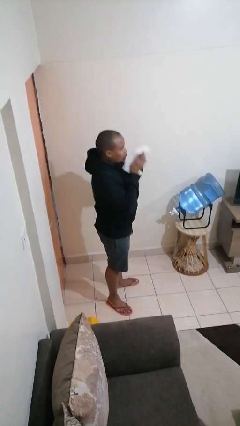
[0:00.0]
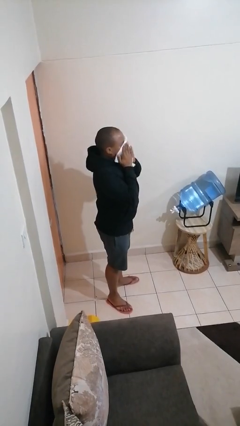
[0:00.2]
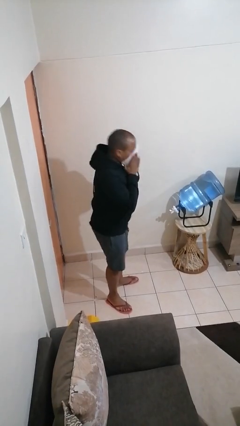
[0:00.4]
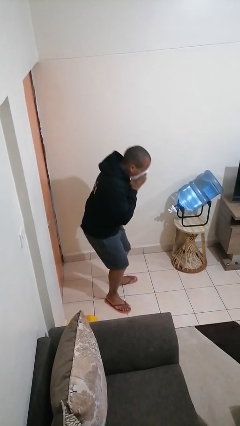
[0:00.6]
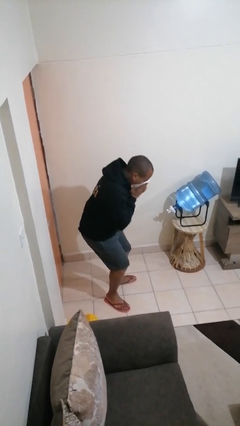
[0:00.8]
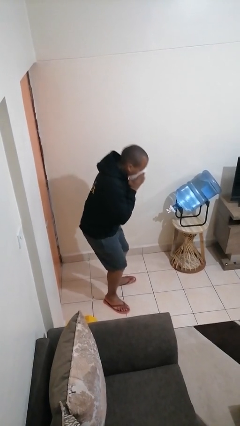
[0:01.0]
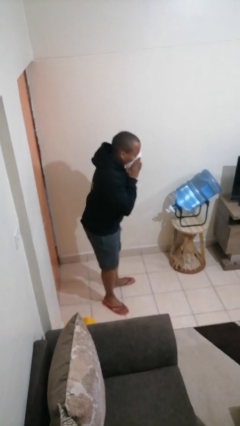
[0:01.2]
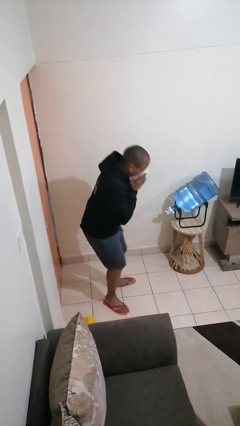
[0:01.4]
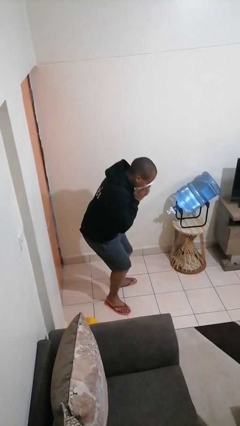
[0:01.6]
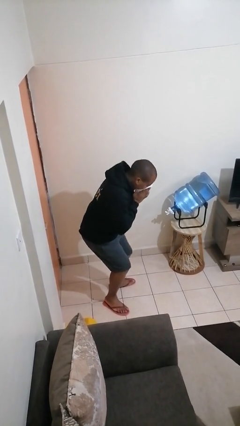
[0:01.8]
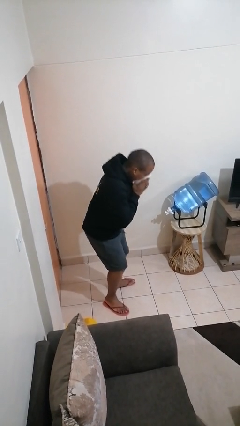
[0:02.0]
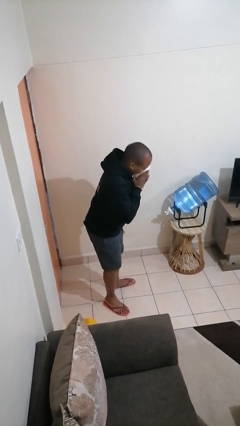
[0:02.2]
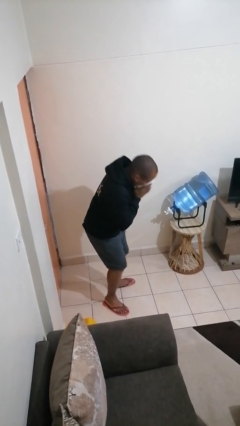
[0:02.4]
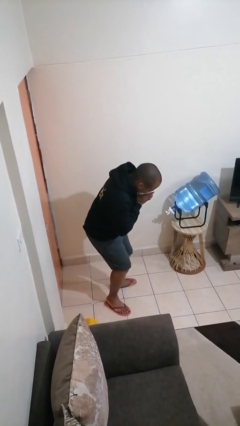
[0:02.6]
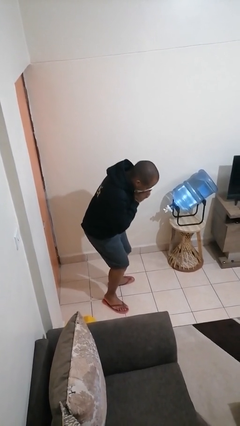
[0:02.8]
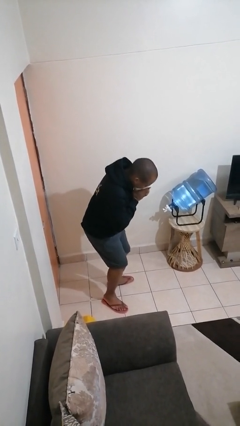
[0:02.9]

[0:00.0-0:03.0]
person blows nose

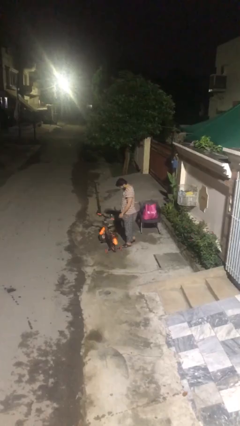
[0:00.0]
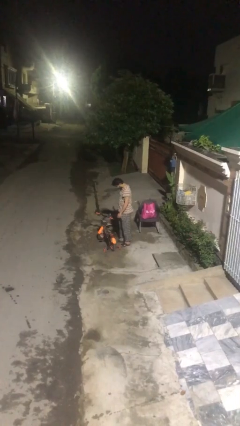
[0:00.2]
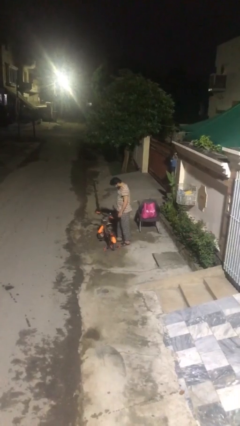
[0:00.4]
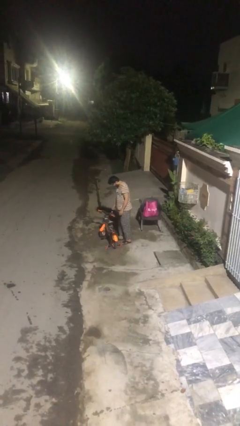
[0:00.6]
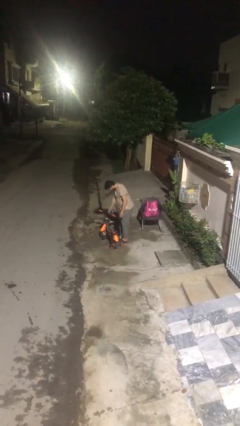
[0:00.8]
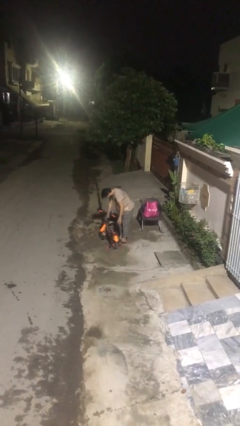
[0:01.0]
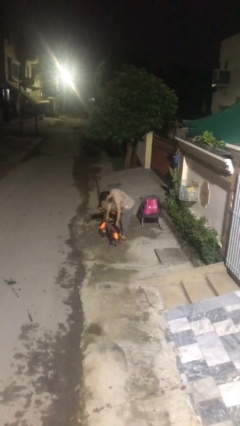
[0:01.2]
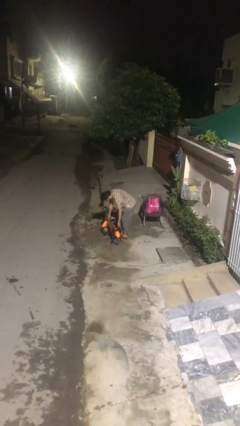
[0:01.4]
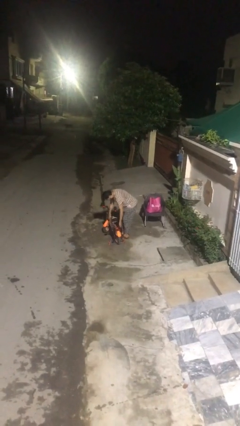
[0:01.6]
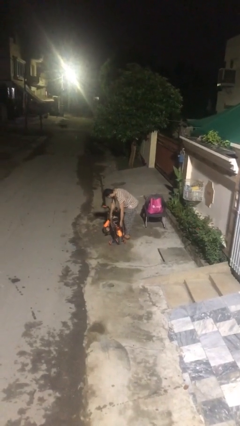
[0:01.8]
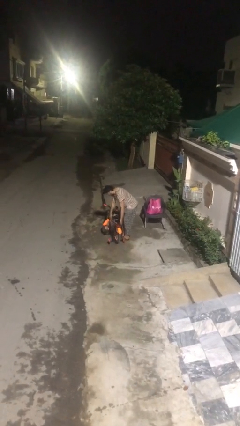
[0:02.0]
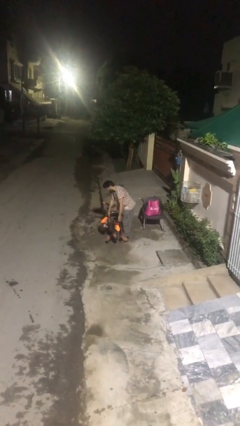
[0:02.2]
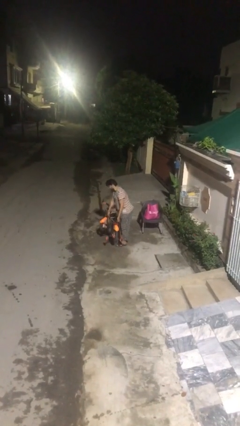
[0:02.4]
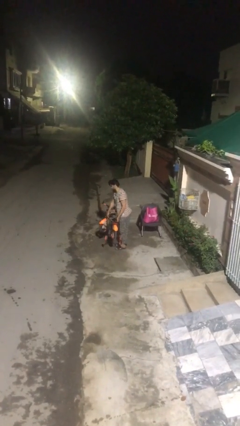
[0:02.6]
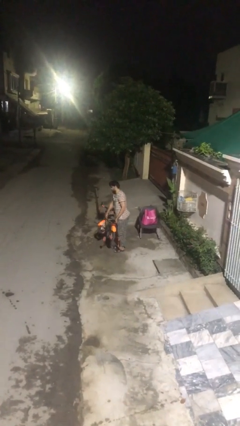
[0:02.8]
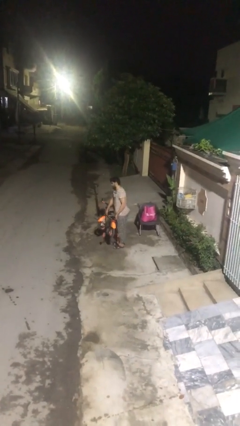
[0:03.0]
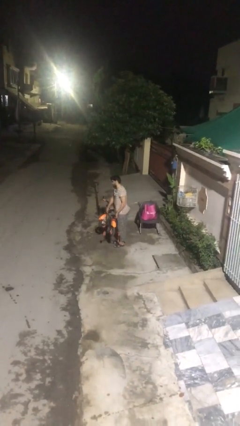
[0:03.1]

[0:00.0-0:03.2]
person picks up object from floor

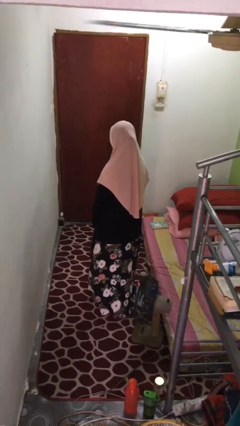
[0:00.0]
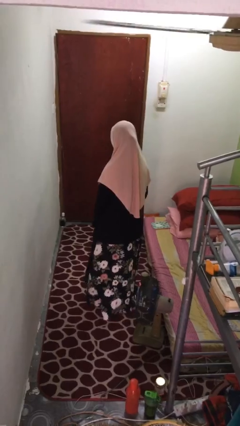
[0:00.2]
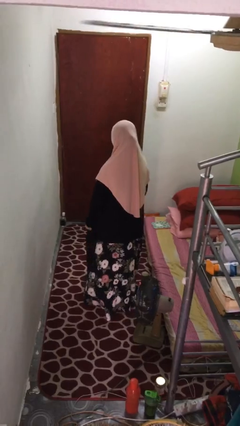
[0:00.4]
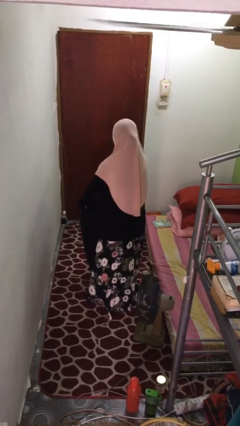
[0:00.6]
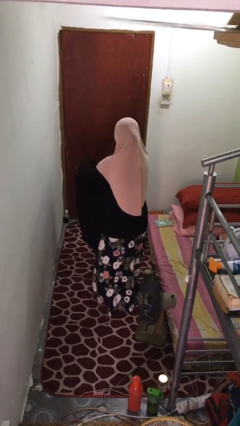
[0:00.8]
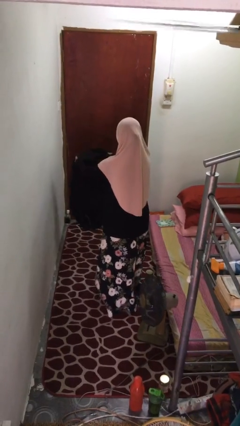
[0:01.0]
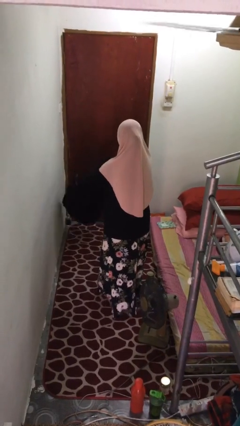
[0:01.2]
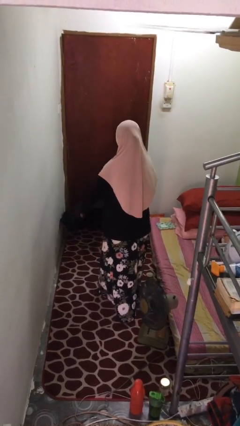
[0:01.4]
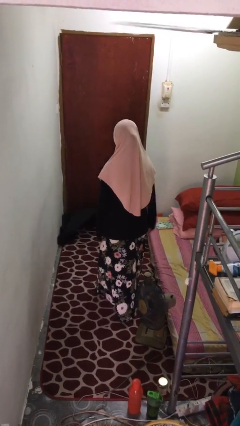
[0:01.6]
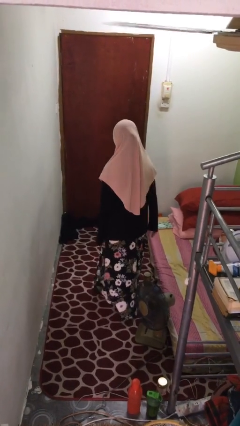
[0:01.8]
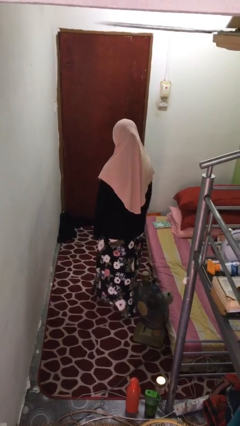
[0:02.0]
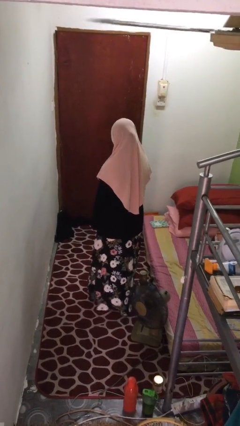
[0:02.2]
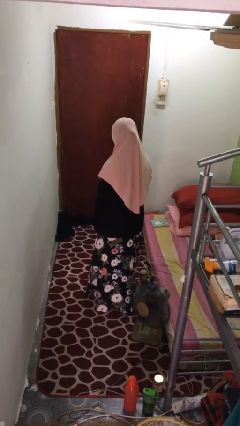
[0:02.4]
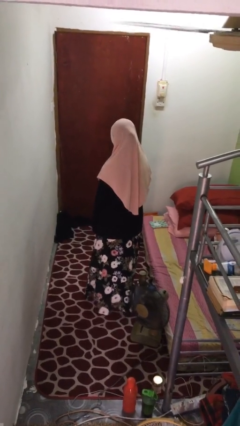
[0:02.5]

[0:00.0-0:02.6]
person throws object to ground

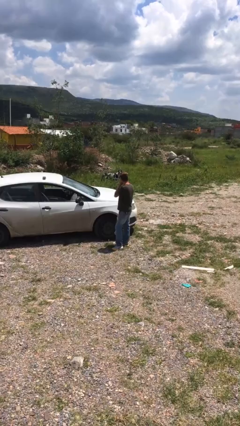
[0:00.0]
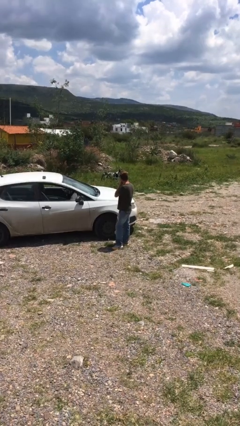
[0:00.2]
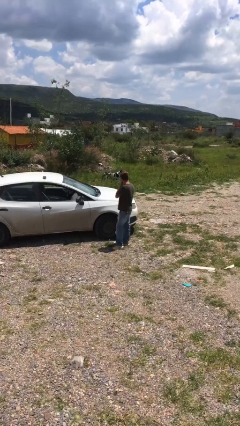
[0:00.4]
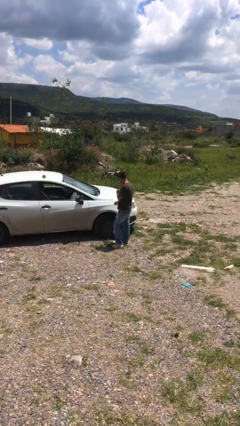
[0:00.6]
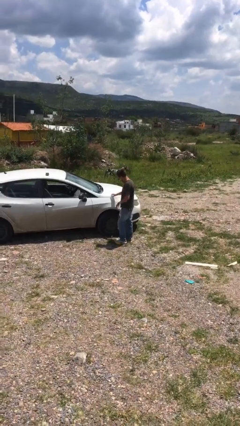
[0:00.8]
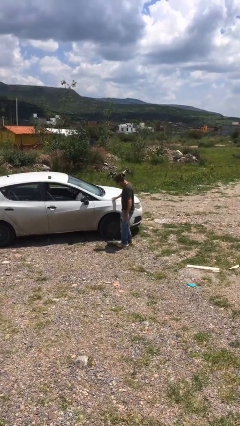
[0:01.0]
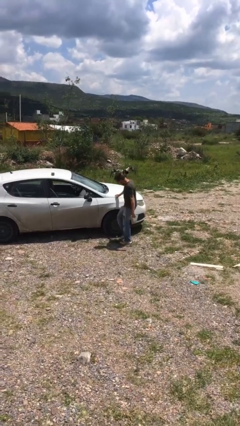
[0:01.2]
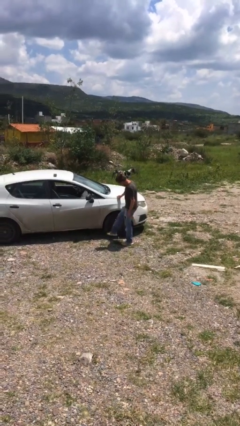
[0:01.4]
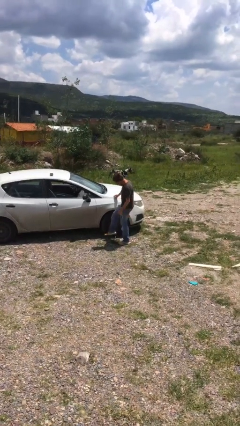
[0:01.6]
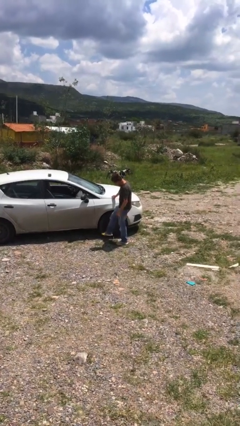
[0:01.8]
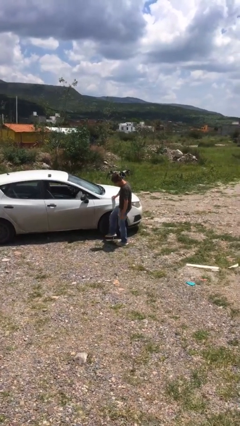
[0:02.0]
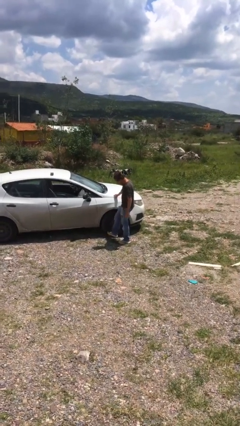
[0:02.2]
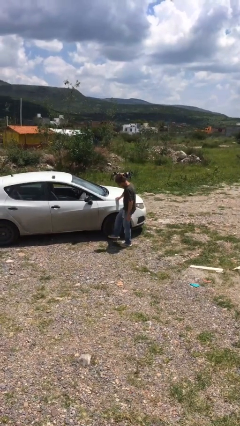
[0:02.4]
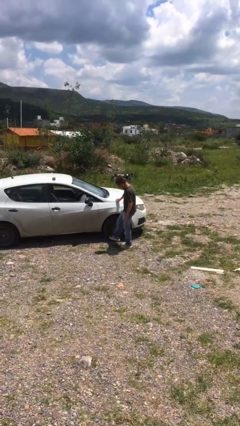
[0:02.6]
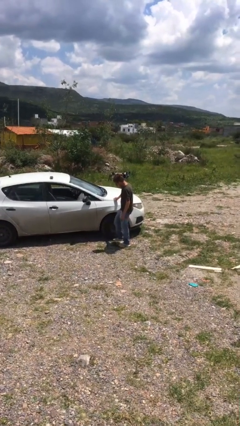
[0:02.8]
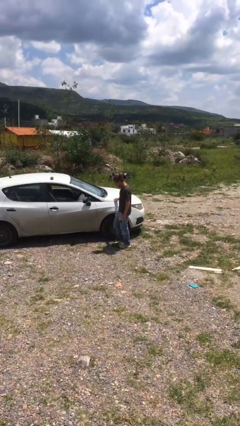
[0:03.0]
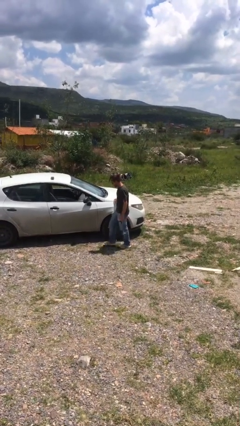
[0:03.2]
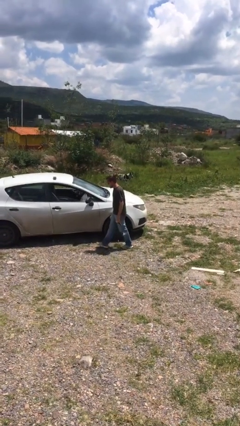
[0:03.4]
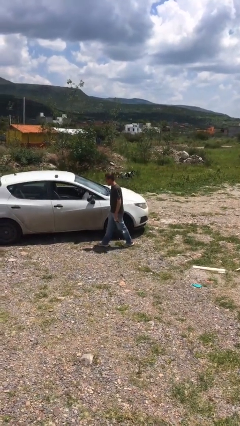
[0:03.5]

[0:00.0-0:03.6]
person kicks car tires

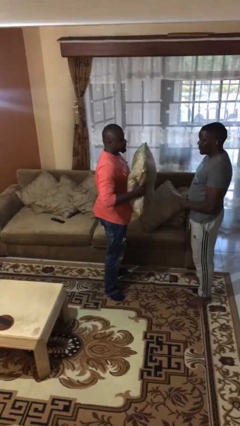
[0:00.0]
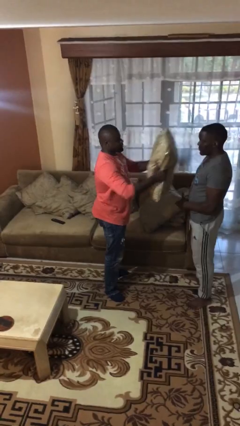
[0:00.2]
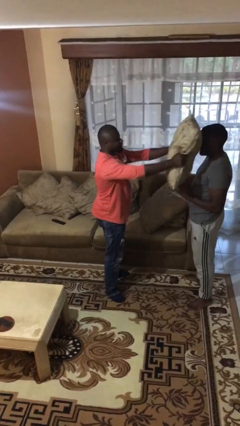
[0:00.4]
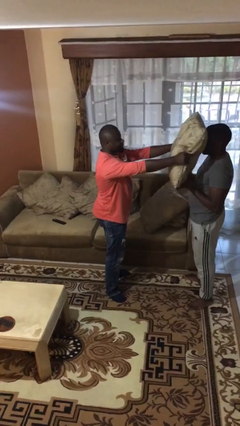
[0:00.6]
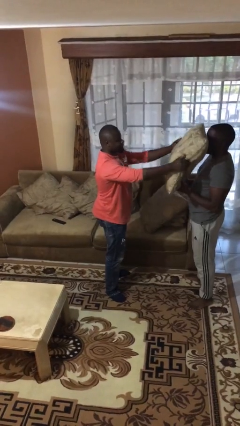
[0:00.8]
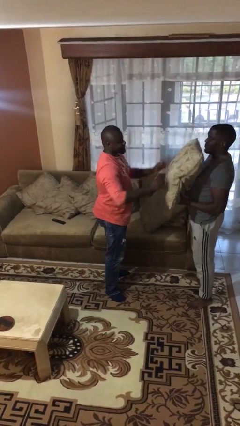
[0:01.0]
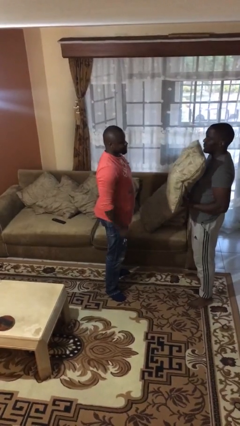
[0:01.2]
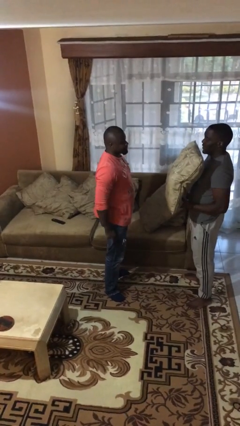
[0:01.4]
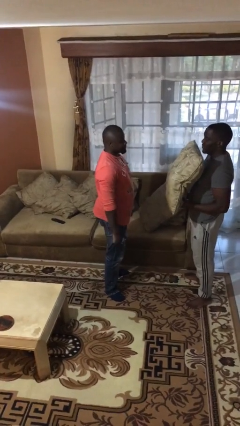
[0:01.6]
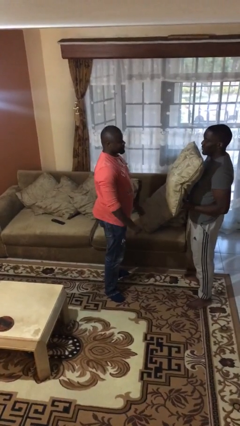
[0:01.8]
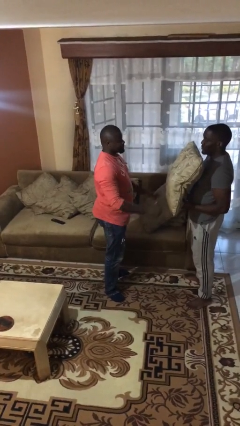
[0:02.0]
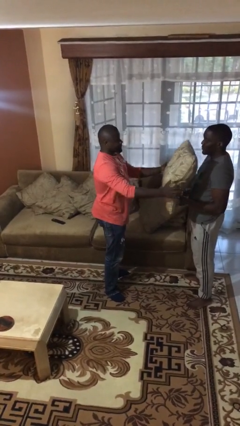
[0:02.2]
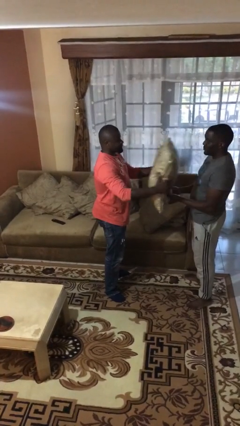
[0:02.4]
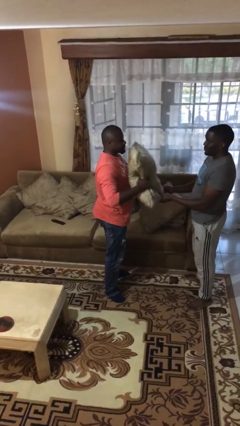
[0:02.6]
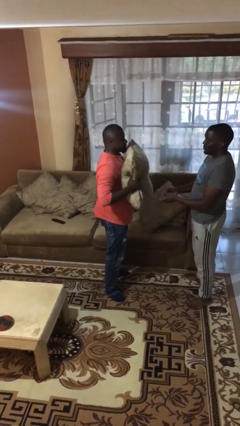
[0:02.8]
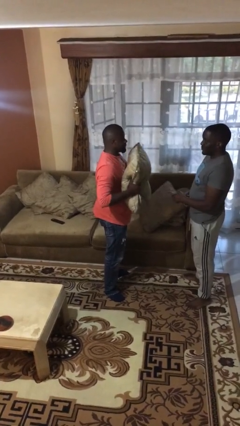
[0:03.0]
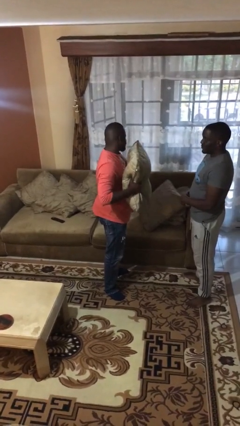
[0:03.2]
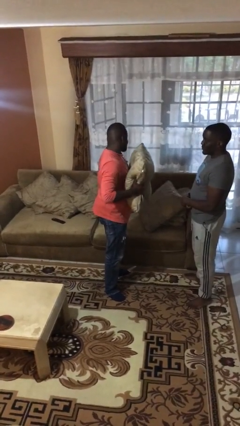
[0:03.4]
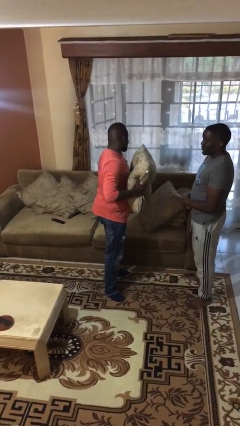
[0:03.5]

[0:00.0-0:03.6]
person transfers object to person

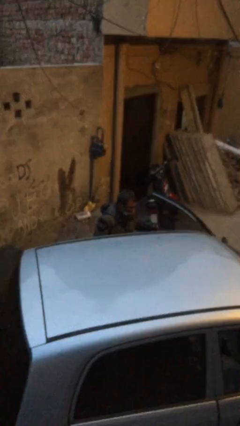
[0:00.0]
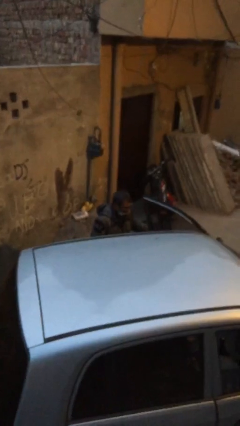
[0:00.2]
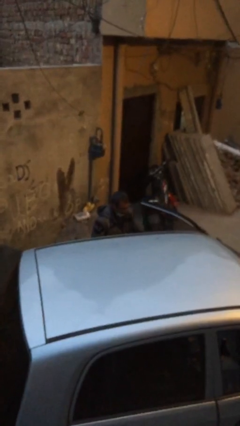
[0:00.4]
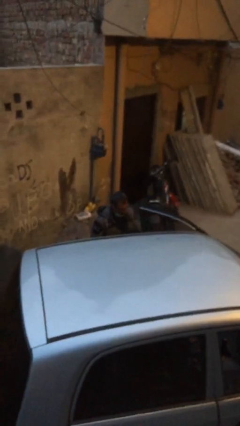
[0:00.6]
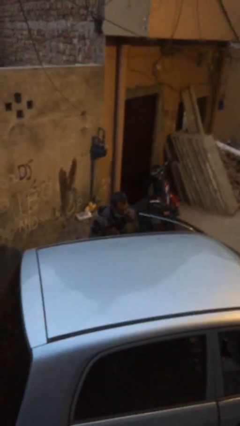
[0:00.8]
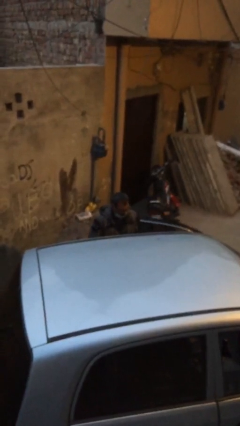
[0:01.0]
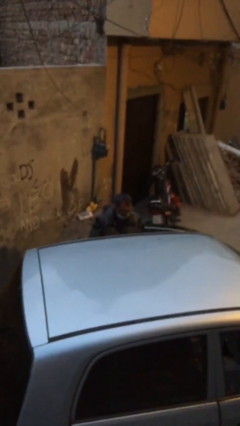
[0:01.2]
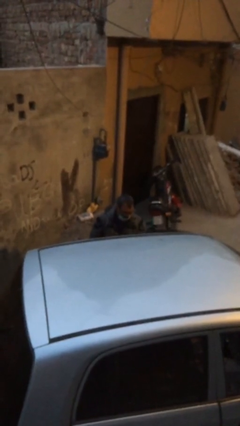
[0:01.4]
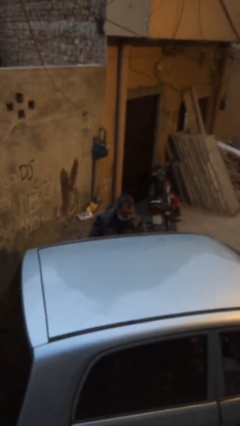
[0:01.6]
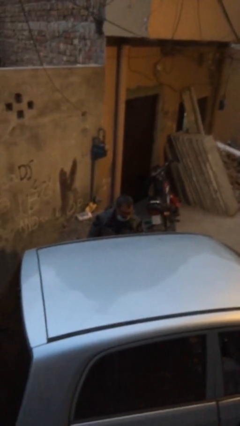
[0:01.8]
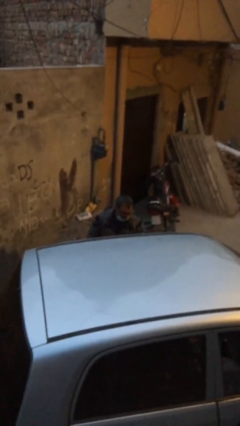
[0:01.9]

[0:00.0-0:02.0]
person closes car door
